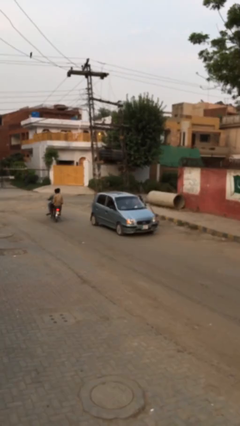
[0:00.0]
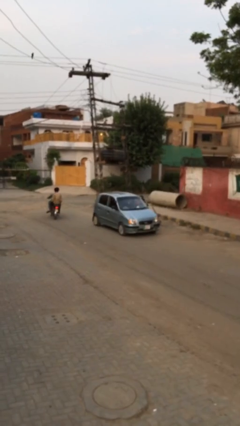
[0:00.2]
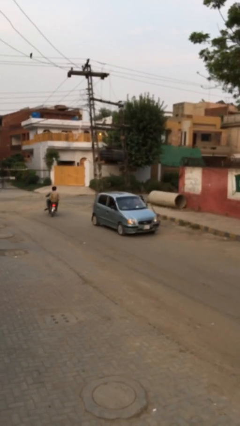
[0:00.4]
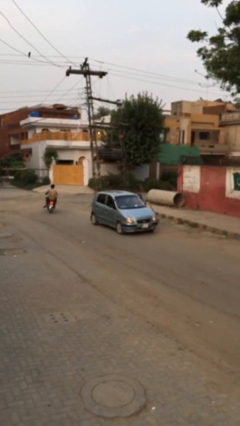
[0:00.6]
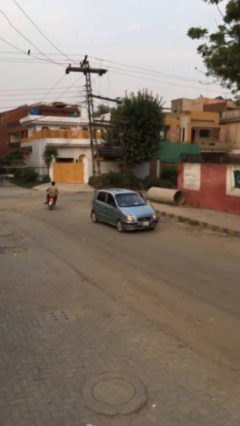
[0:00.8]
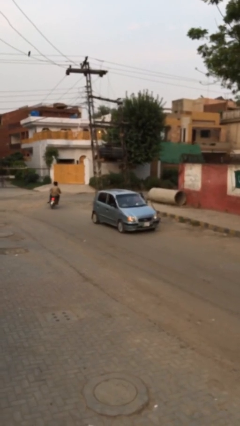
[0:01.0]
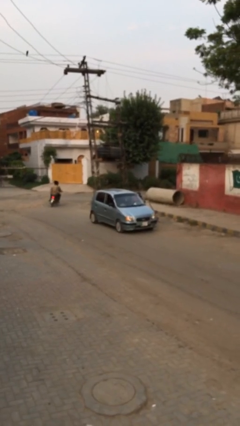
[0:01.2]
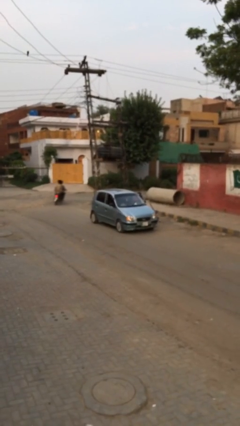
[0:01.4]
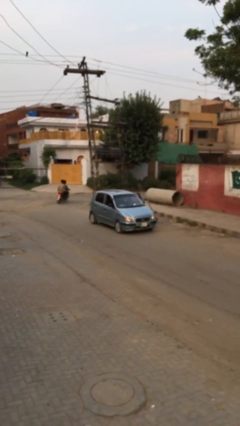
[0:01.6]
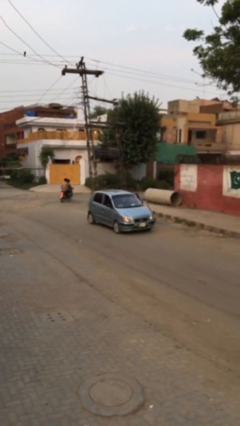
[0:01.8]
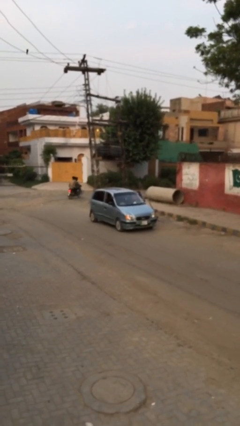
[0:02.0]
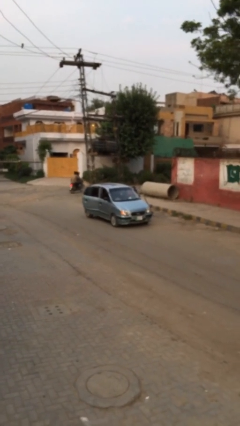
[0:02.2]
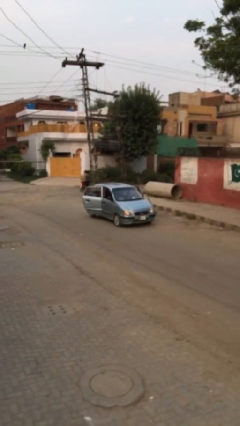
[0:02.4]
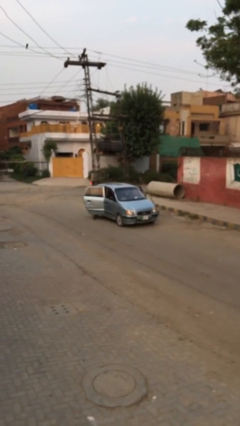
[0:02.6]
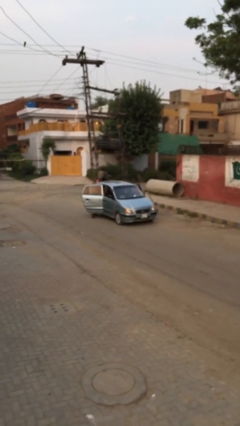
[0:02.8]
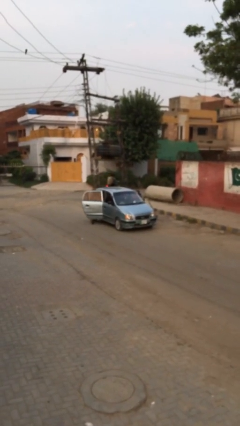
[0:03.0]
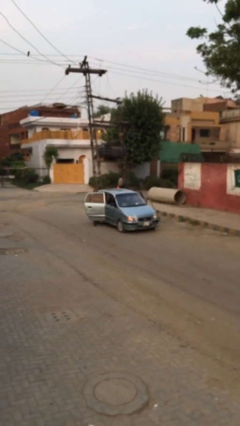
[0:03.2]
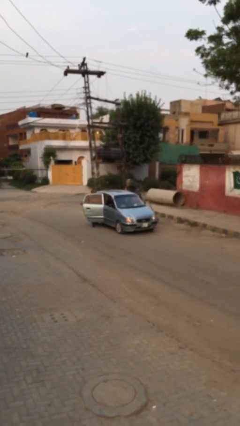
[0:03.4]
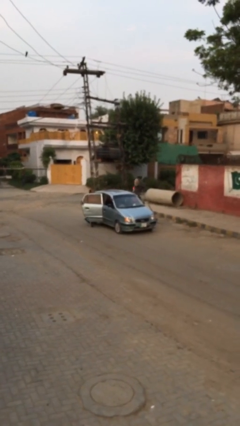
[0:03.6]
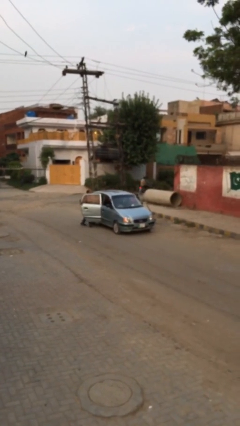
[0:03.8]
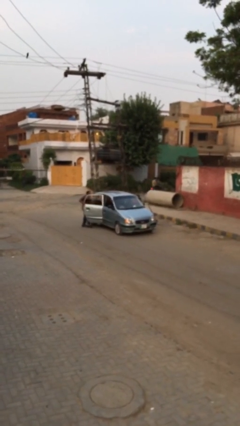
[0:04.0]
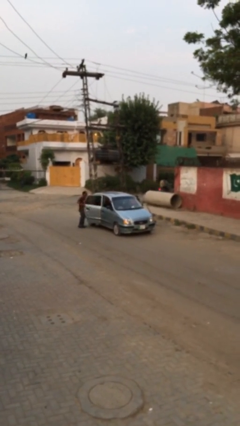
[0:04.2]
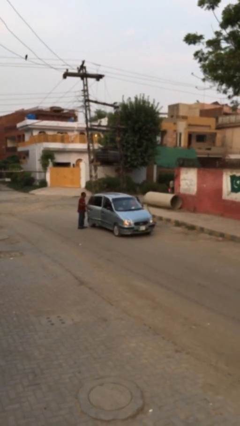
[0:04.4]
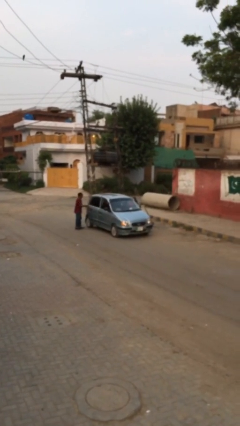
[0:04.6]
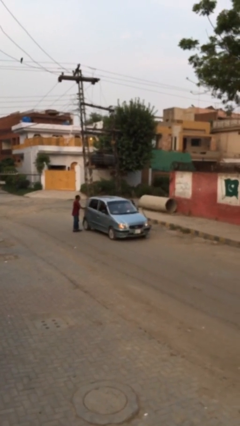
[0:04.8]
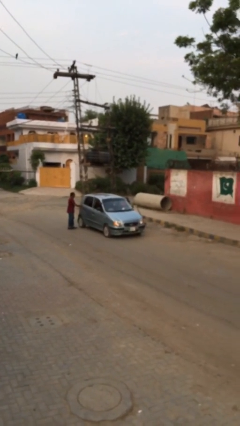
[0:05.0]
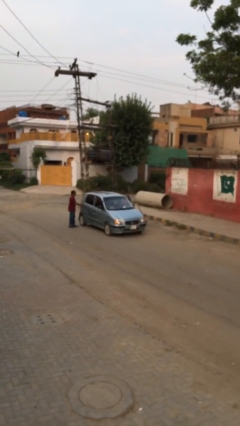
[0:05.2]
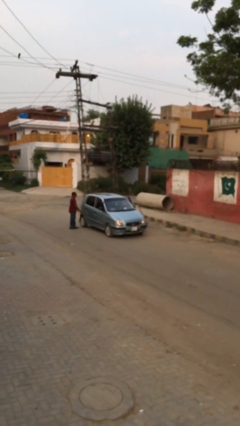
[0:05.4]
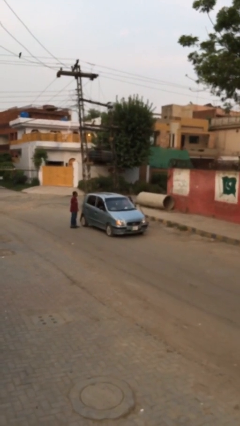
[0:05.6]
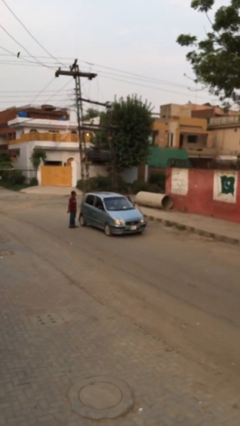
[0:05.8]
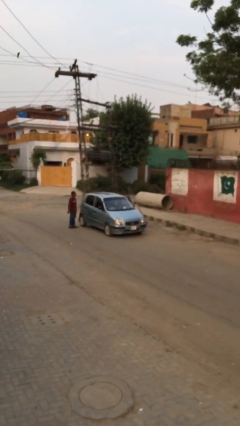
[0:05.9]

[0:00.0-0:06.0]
car drops off person

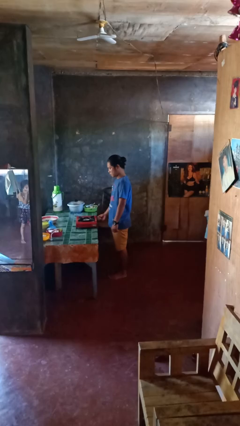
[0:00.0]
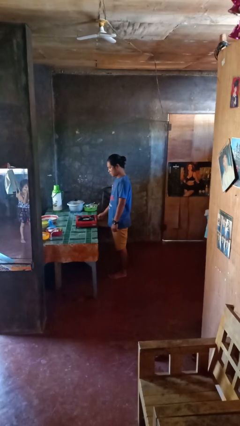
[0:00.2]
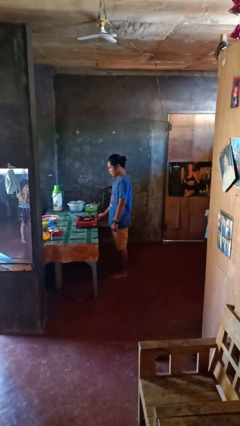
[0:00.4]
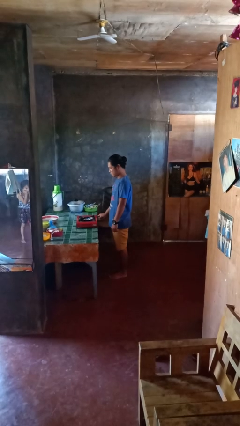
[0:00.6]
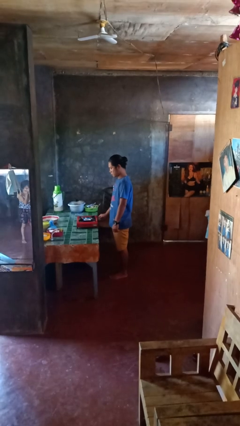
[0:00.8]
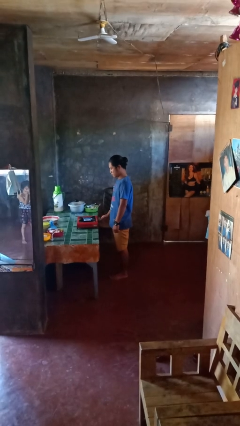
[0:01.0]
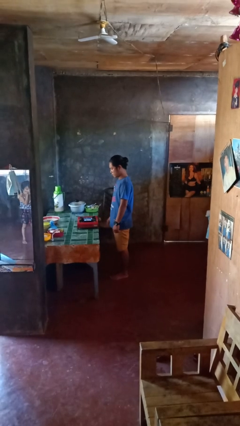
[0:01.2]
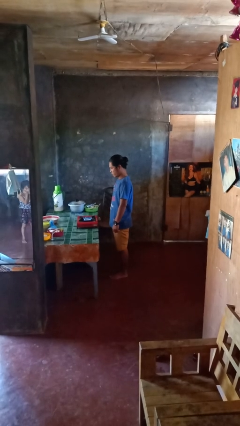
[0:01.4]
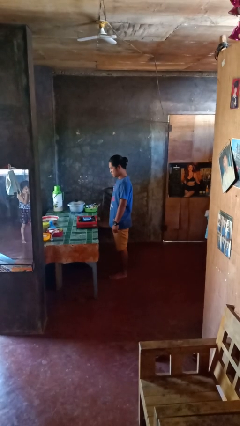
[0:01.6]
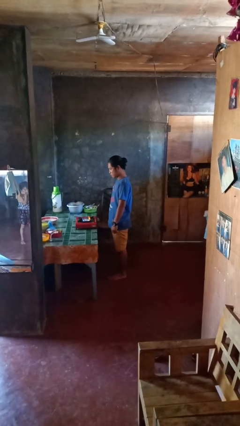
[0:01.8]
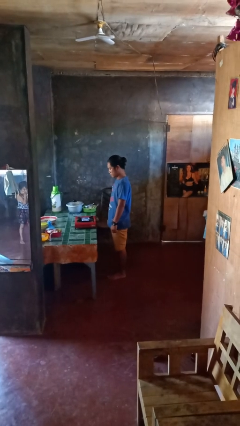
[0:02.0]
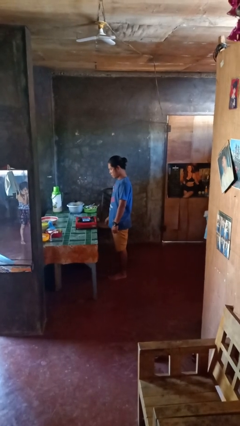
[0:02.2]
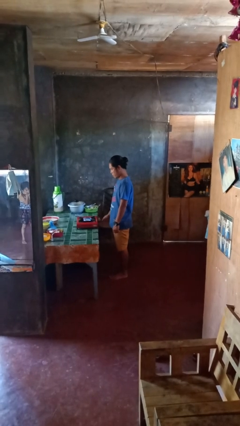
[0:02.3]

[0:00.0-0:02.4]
person turns on stovetop

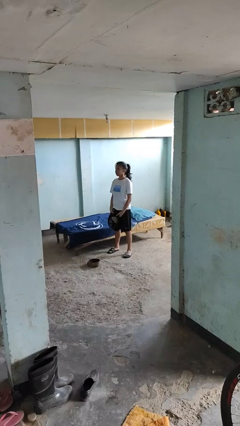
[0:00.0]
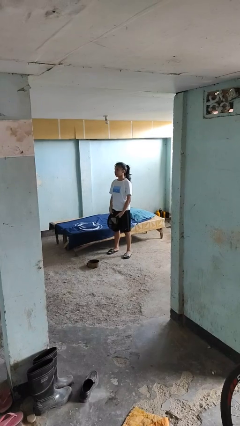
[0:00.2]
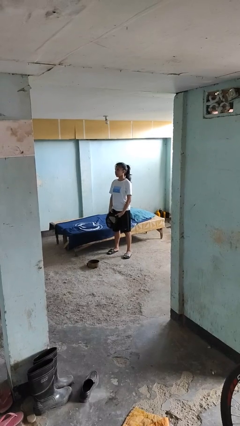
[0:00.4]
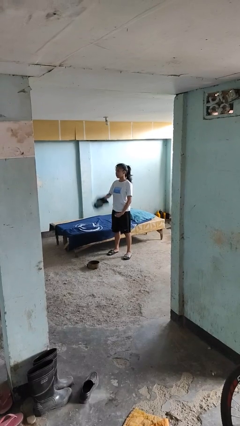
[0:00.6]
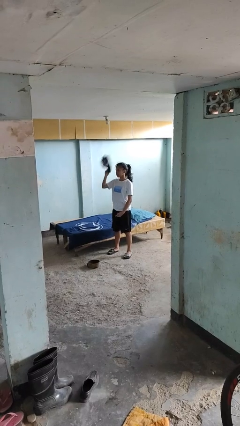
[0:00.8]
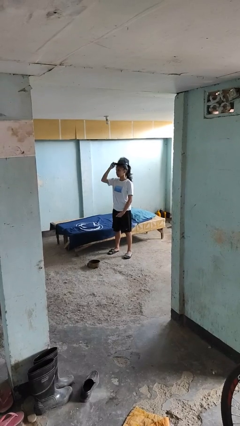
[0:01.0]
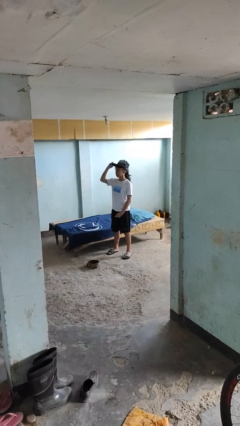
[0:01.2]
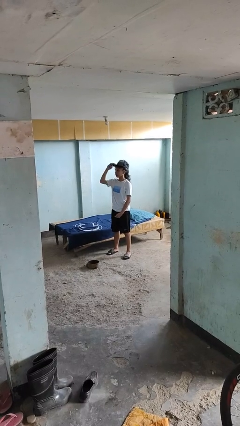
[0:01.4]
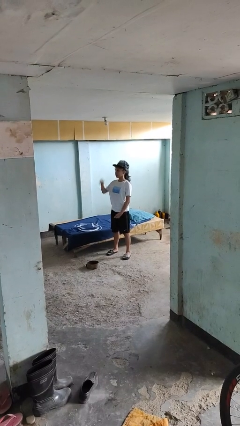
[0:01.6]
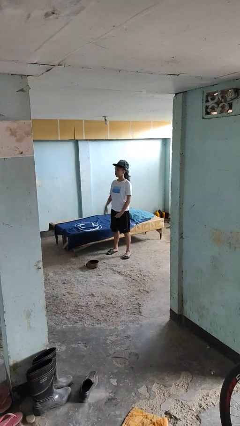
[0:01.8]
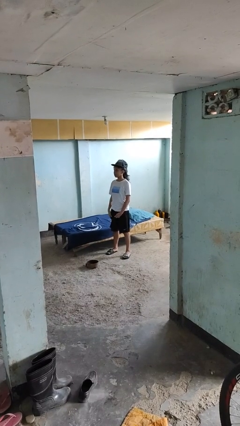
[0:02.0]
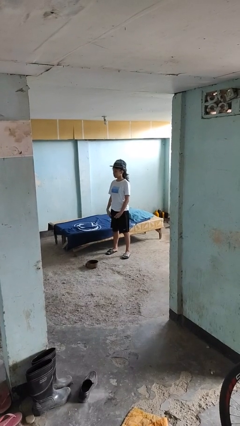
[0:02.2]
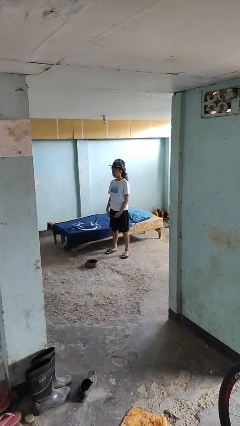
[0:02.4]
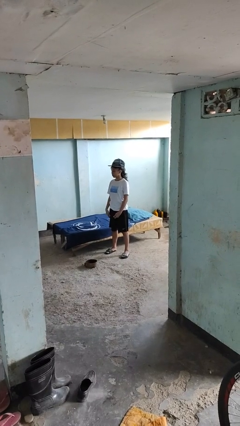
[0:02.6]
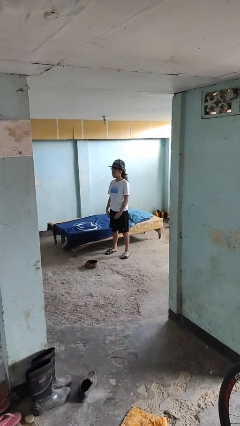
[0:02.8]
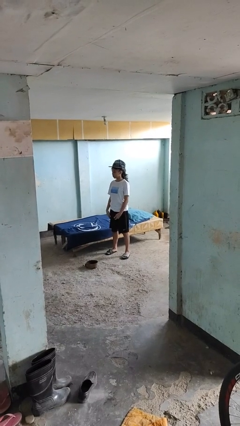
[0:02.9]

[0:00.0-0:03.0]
person puts on hat

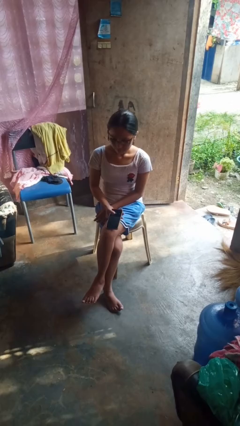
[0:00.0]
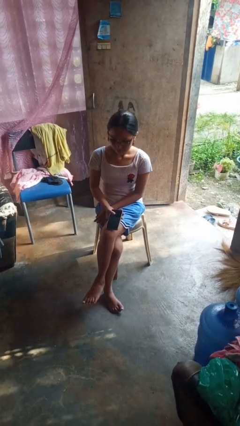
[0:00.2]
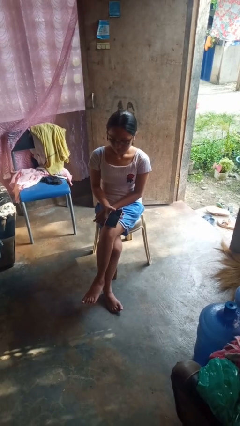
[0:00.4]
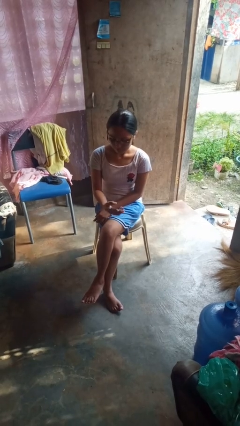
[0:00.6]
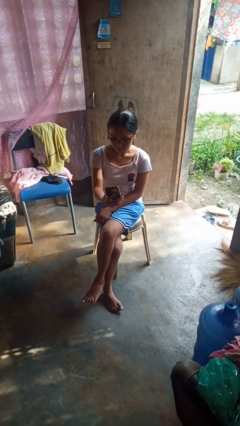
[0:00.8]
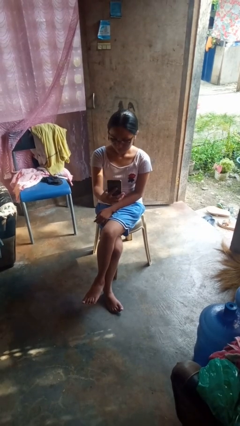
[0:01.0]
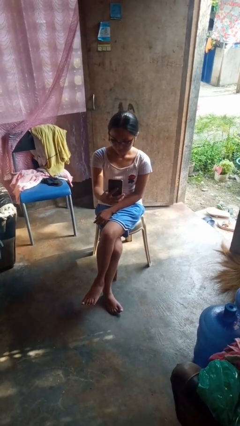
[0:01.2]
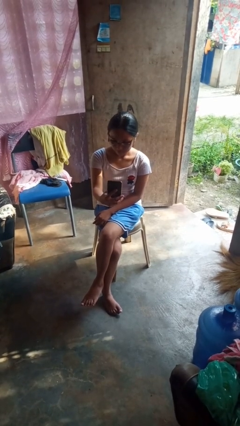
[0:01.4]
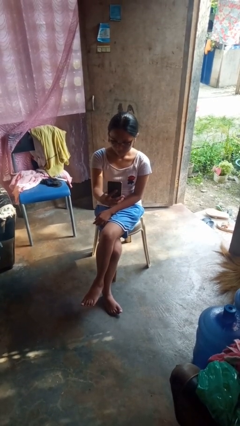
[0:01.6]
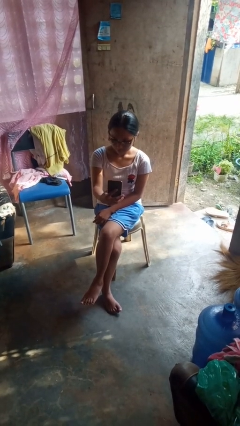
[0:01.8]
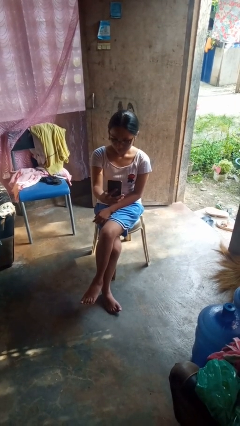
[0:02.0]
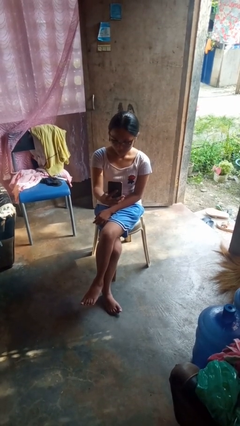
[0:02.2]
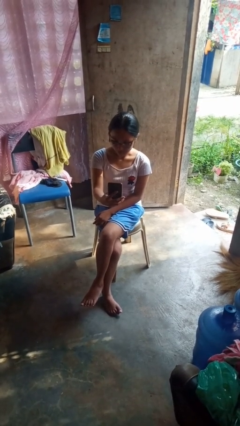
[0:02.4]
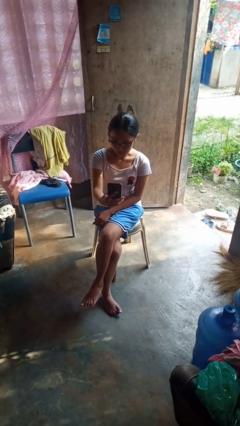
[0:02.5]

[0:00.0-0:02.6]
person takes selfie

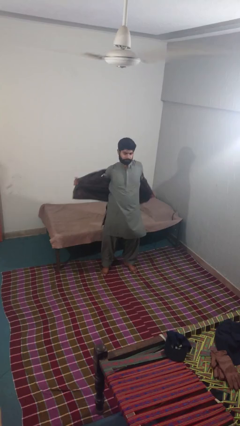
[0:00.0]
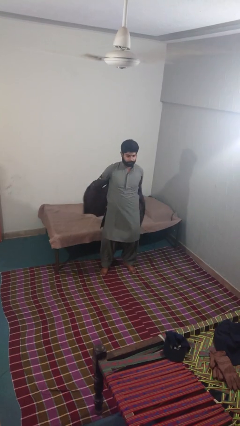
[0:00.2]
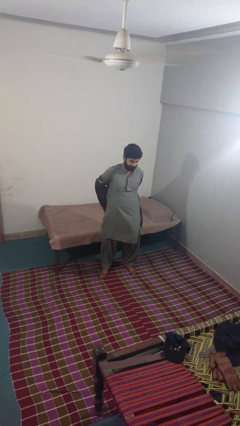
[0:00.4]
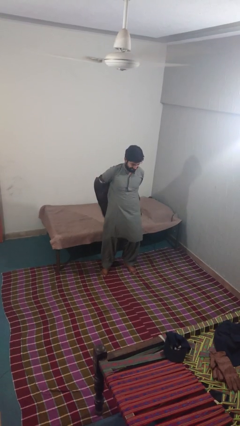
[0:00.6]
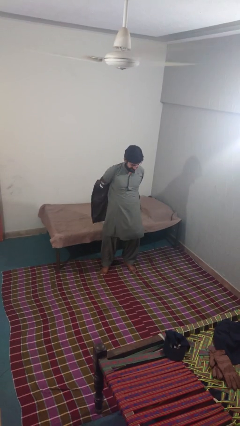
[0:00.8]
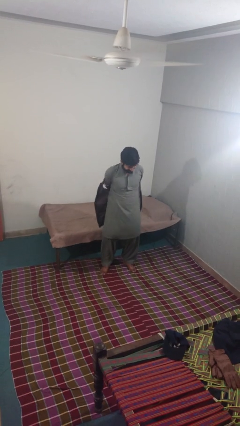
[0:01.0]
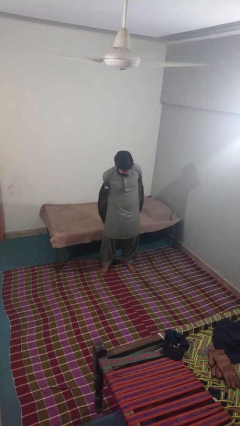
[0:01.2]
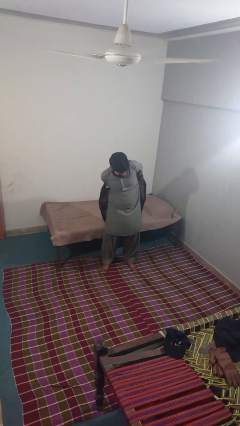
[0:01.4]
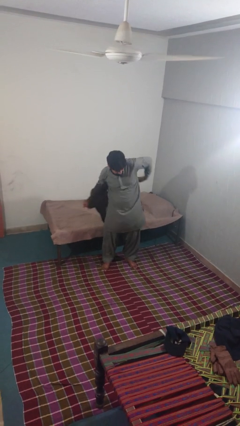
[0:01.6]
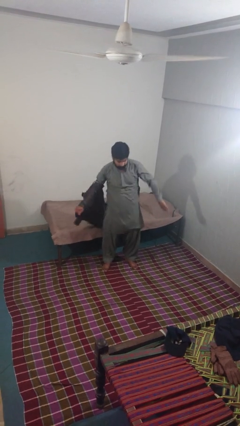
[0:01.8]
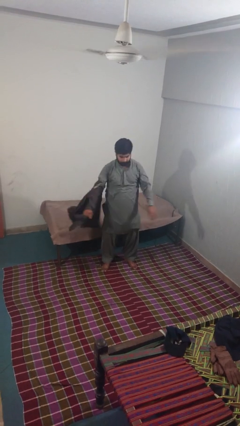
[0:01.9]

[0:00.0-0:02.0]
person takes off jacket

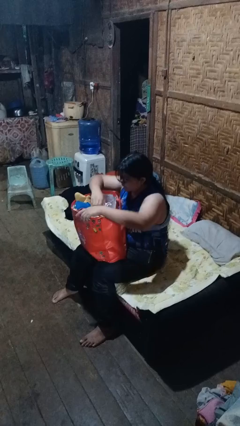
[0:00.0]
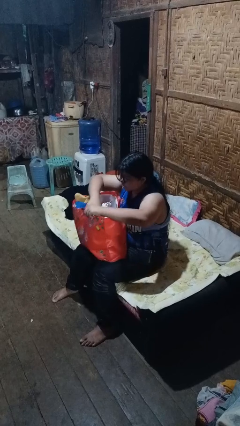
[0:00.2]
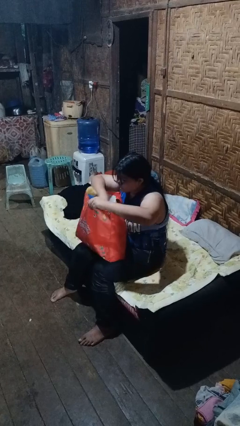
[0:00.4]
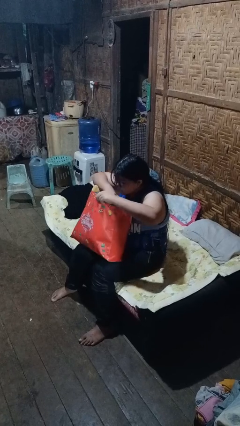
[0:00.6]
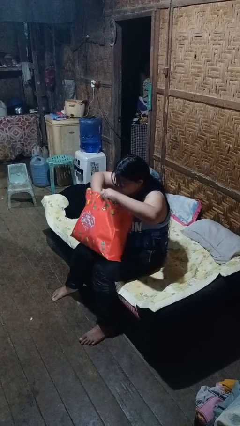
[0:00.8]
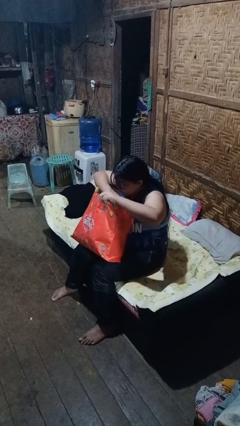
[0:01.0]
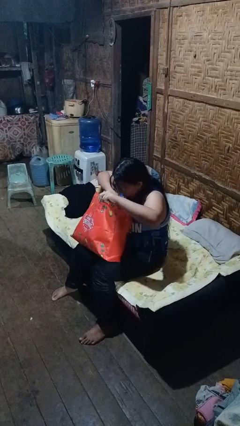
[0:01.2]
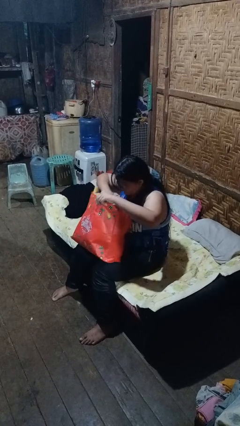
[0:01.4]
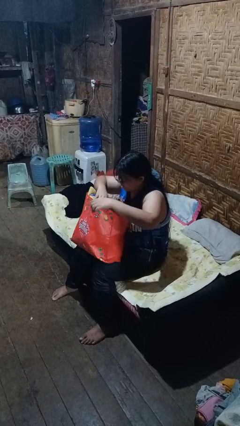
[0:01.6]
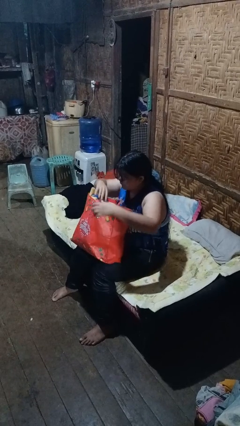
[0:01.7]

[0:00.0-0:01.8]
person searches in bag
